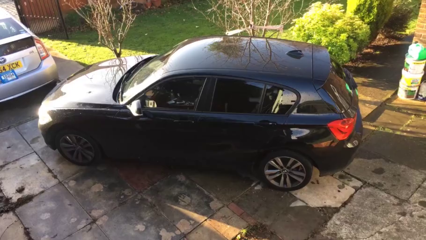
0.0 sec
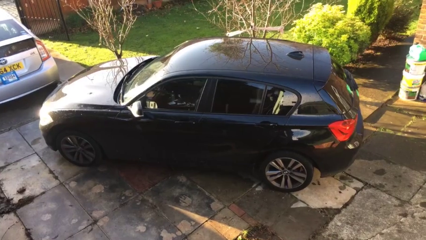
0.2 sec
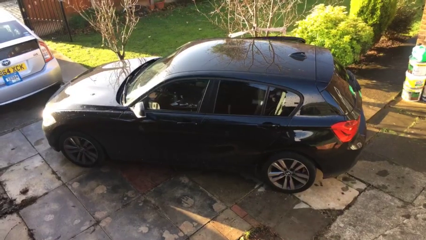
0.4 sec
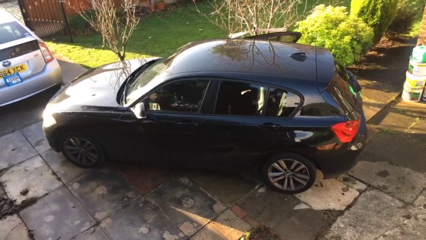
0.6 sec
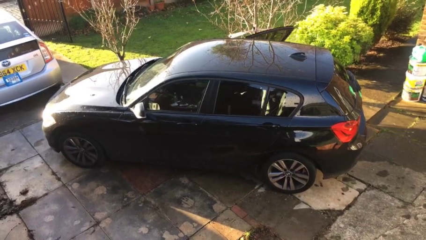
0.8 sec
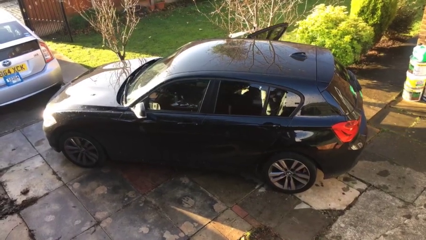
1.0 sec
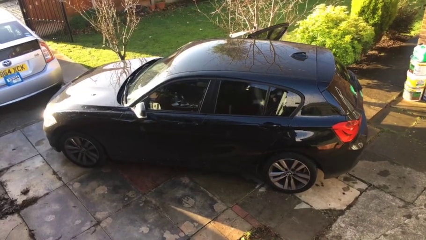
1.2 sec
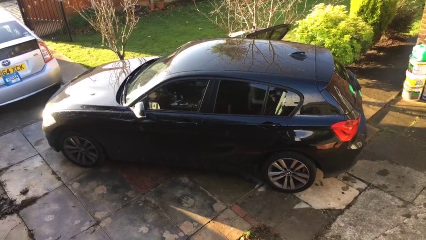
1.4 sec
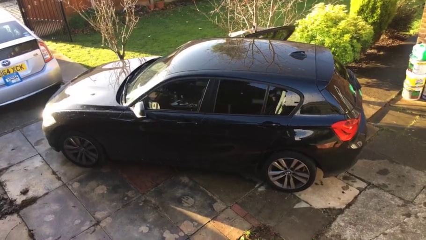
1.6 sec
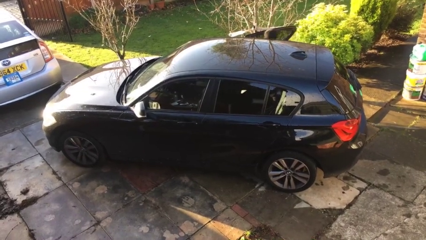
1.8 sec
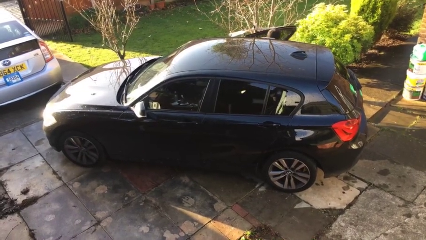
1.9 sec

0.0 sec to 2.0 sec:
car drops off person

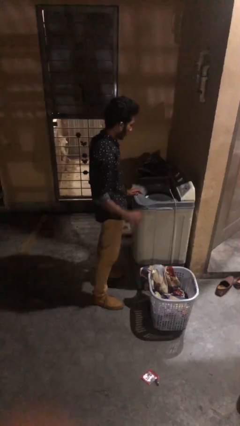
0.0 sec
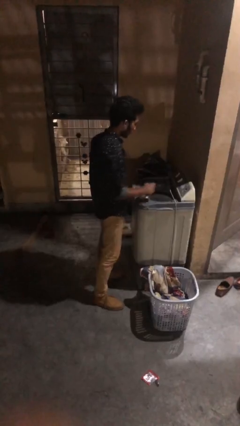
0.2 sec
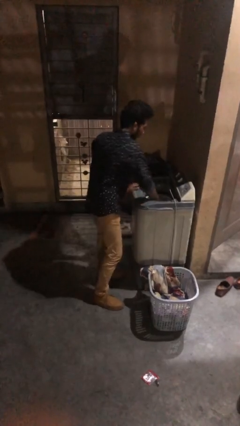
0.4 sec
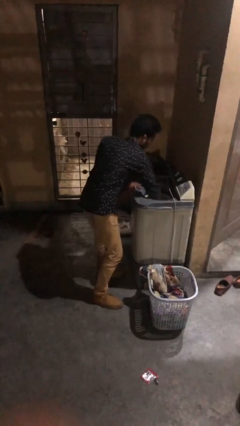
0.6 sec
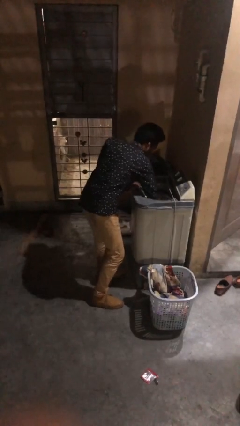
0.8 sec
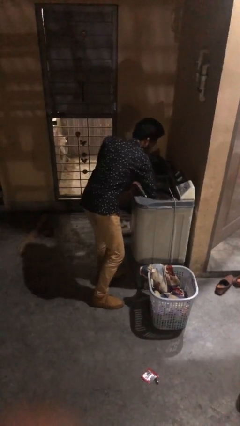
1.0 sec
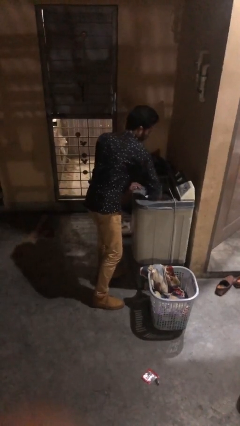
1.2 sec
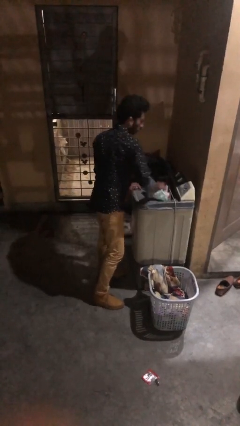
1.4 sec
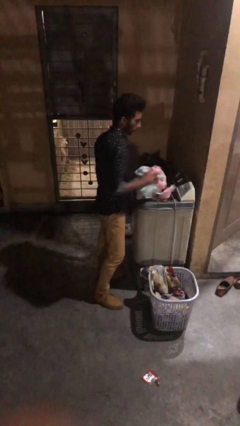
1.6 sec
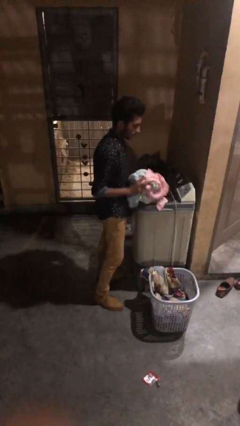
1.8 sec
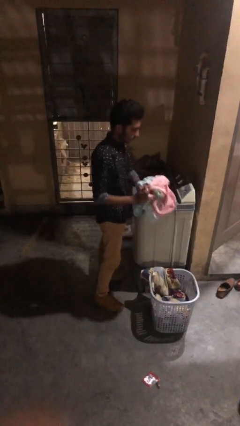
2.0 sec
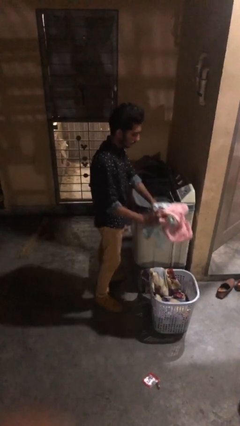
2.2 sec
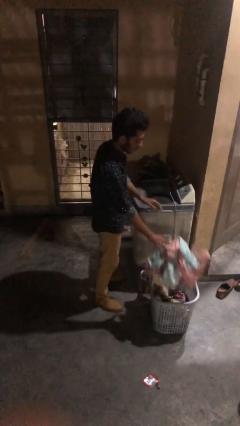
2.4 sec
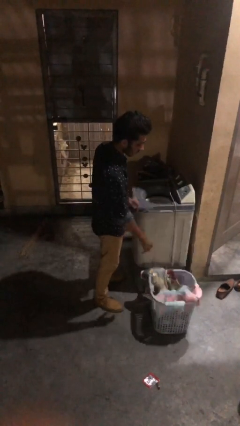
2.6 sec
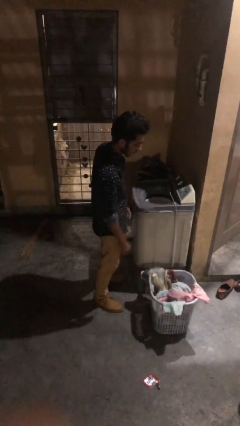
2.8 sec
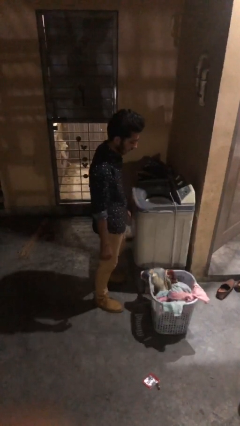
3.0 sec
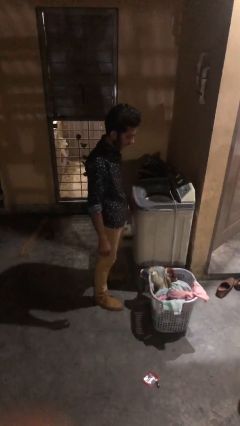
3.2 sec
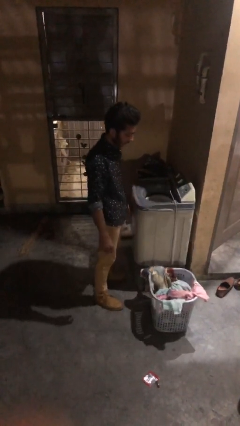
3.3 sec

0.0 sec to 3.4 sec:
person unloads clotheswasher

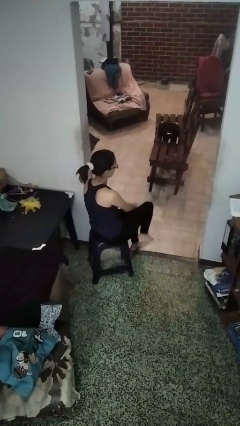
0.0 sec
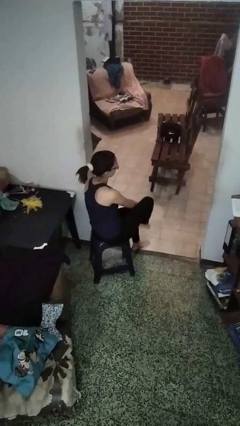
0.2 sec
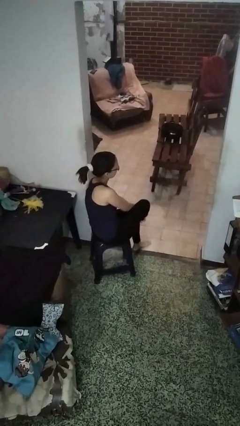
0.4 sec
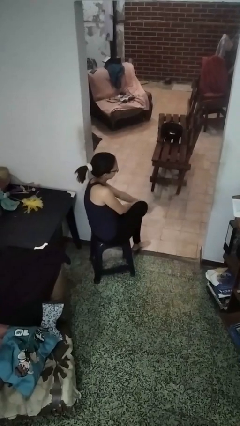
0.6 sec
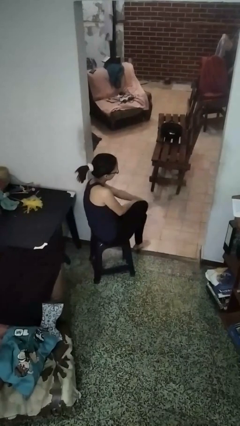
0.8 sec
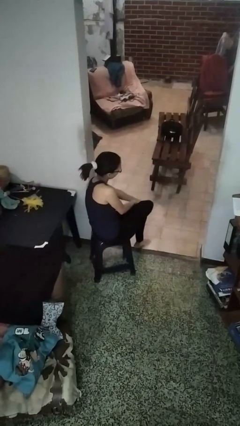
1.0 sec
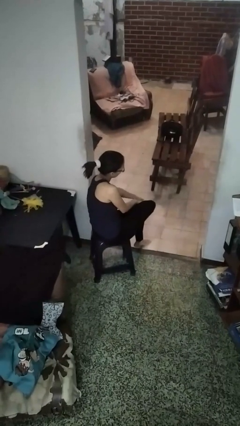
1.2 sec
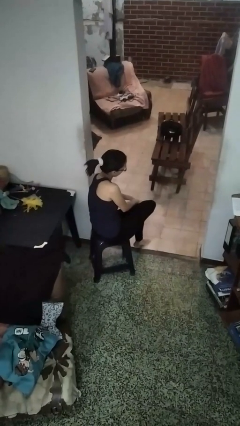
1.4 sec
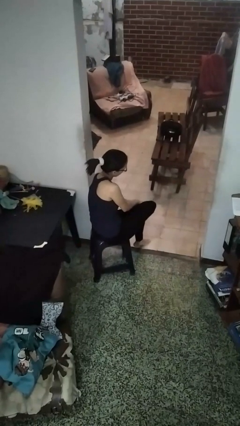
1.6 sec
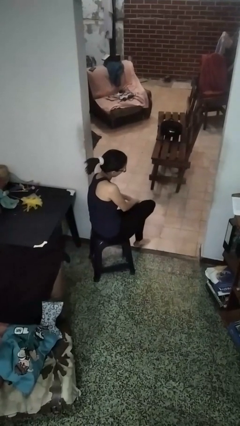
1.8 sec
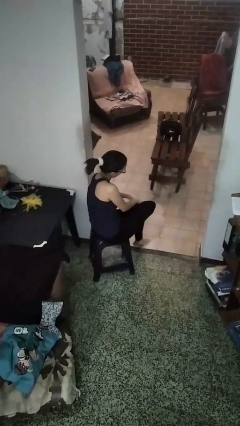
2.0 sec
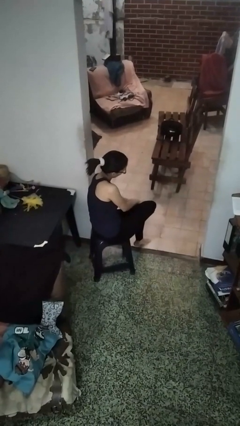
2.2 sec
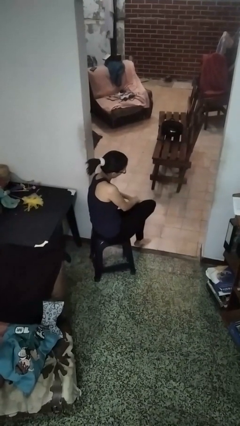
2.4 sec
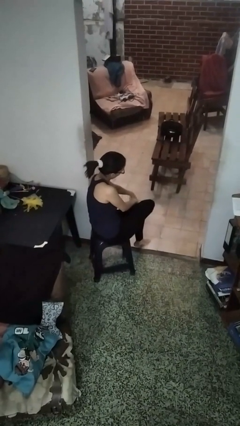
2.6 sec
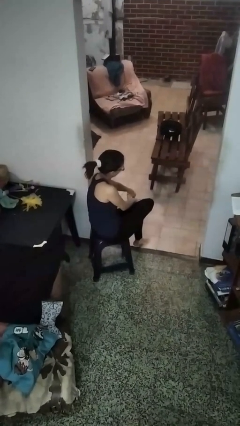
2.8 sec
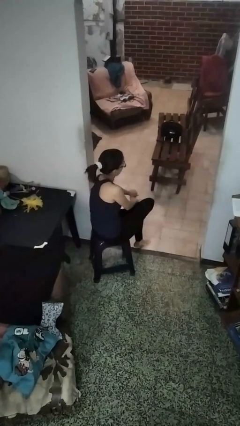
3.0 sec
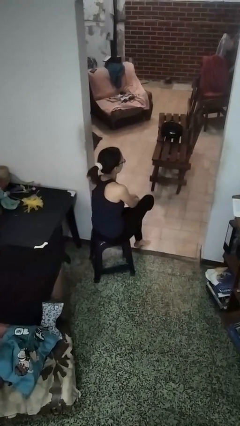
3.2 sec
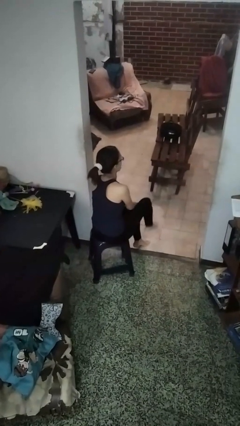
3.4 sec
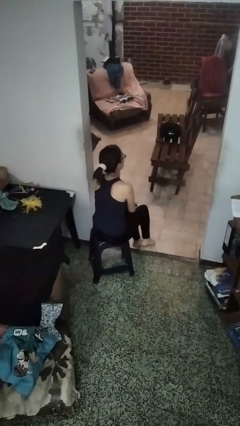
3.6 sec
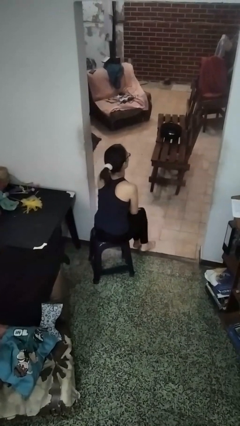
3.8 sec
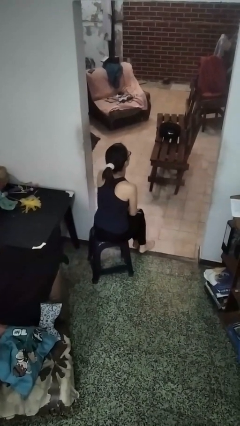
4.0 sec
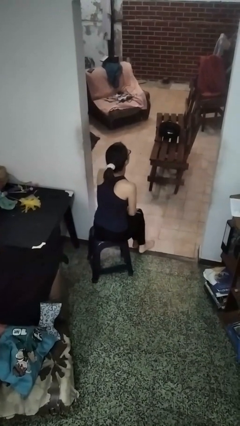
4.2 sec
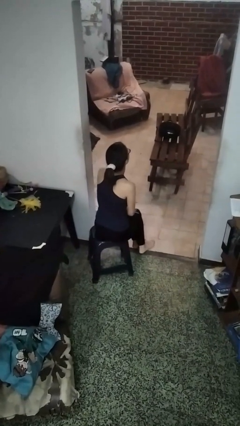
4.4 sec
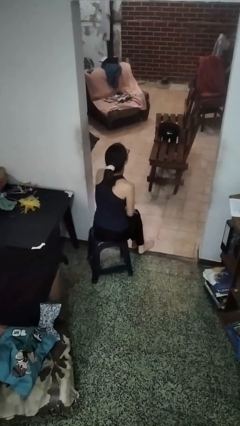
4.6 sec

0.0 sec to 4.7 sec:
person rubs foot

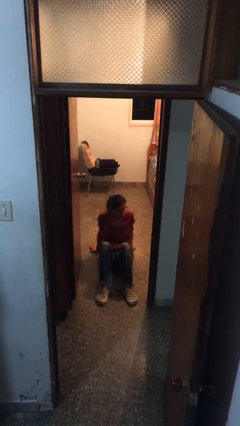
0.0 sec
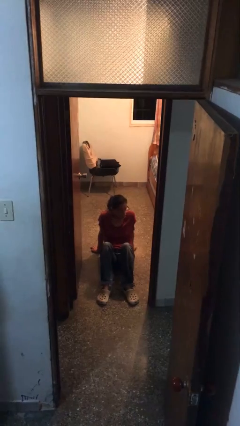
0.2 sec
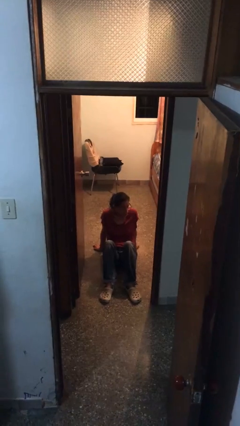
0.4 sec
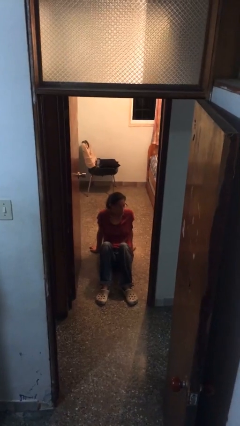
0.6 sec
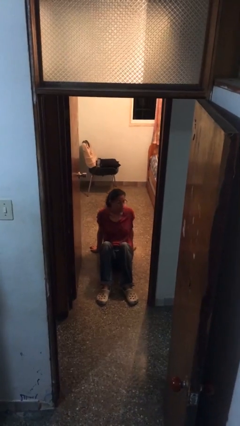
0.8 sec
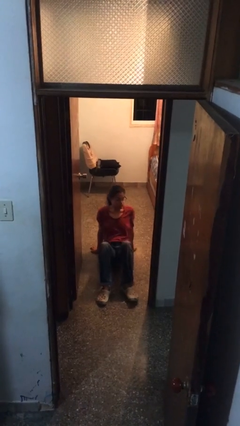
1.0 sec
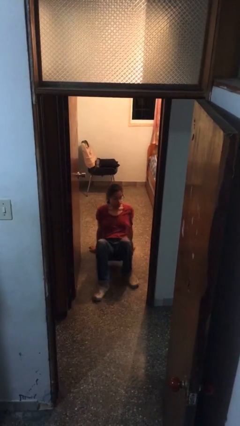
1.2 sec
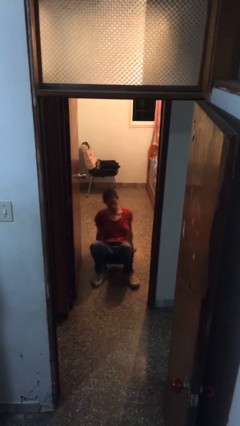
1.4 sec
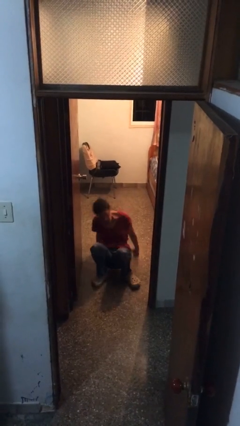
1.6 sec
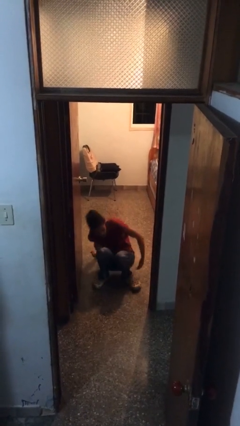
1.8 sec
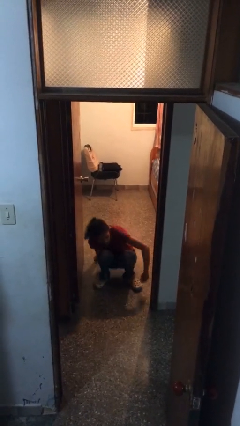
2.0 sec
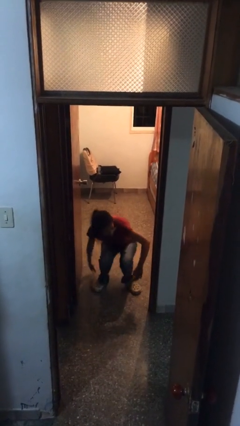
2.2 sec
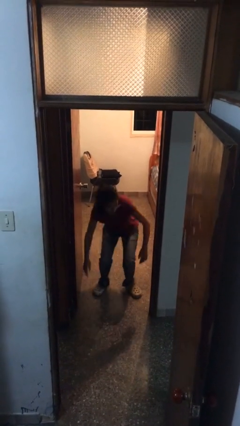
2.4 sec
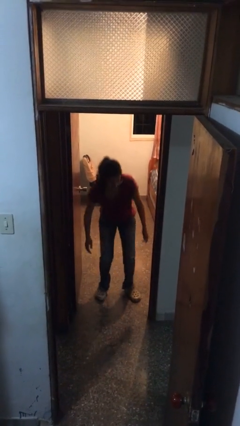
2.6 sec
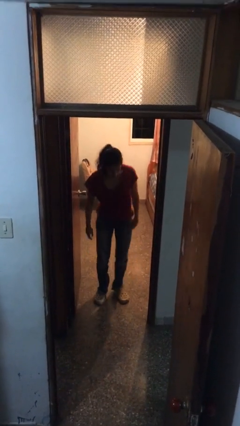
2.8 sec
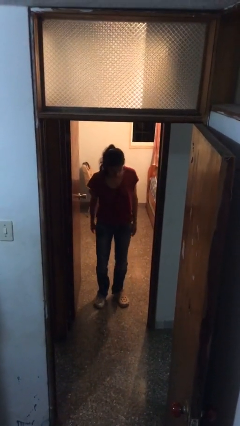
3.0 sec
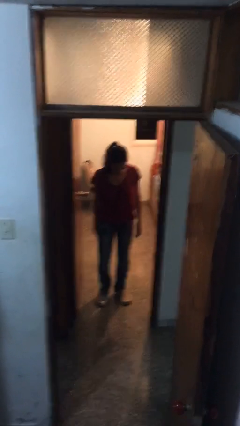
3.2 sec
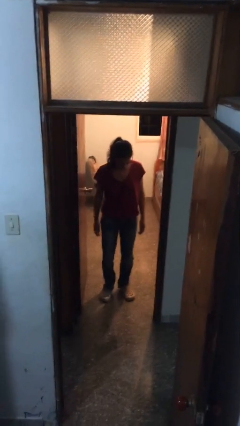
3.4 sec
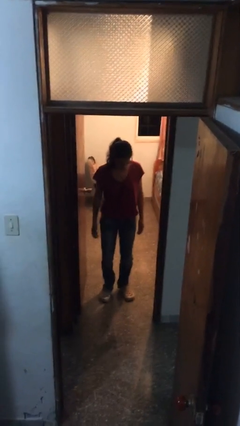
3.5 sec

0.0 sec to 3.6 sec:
person stands up

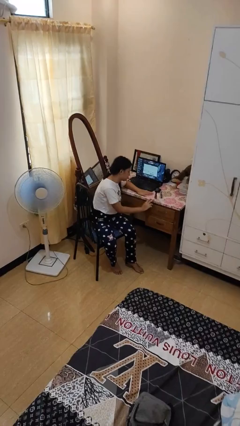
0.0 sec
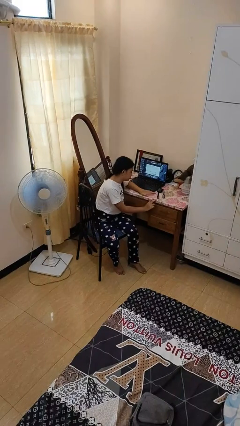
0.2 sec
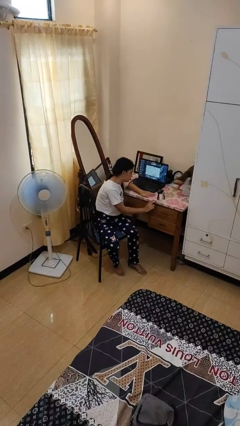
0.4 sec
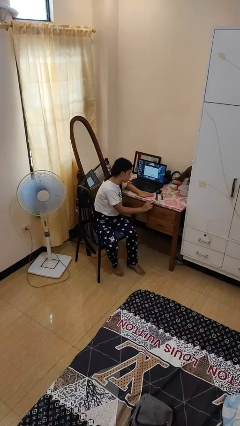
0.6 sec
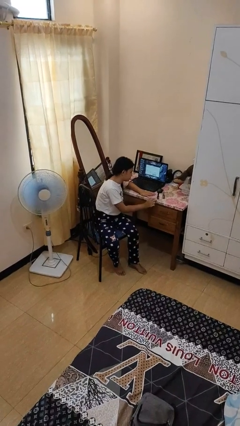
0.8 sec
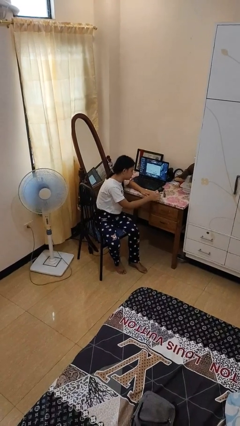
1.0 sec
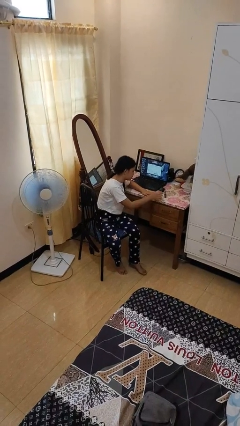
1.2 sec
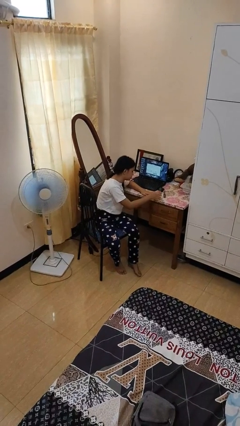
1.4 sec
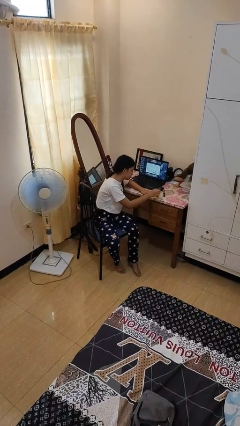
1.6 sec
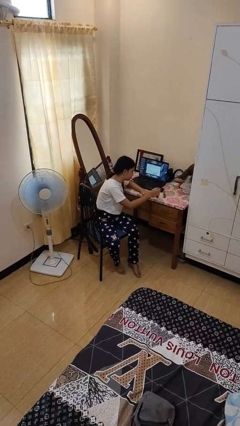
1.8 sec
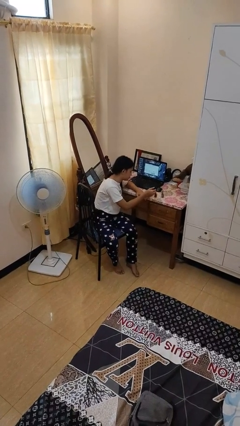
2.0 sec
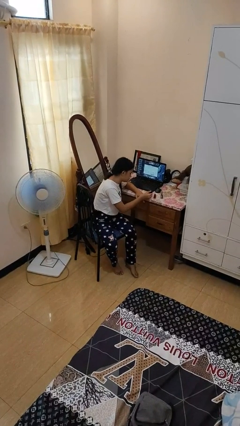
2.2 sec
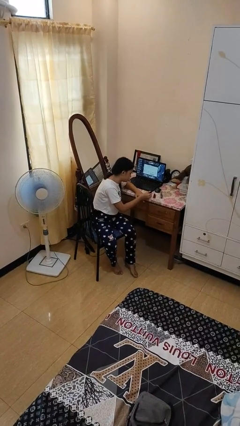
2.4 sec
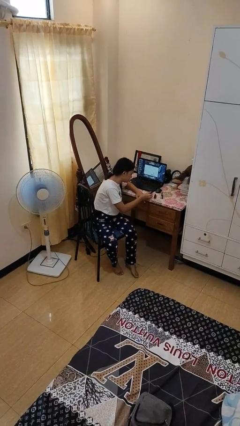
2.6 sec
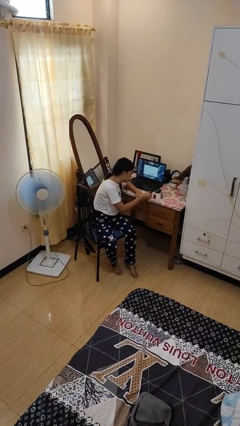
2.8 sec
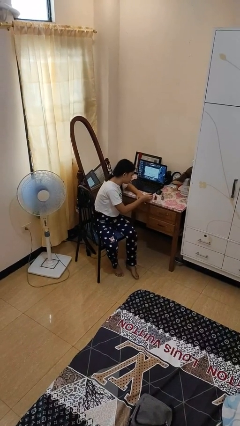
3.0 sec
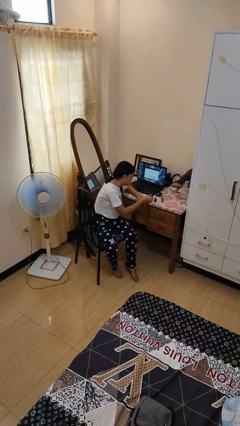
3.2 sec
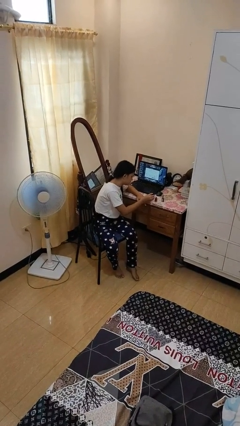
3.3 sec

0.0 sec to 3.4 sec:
person paints fingernails

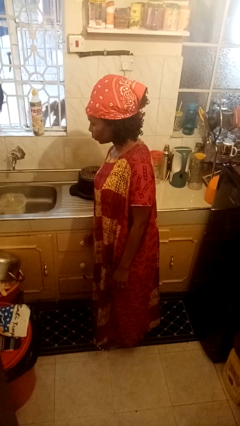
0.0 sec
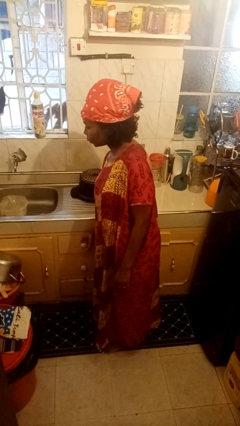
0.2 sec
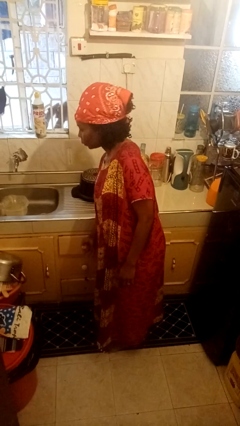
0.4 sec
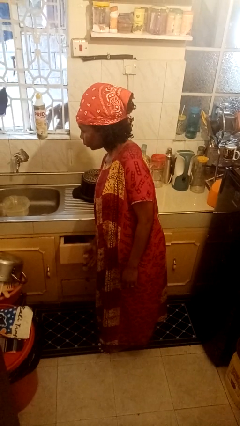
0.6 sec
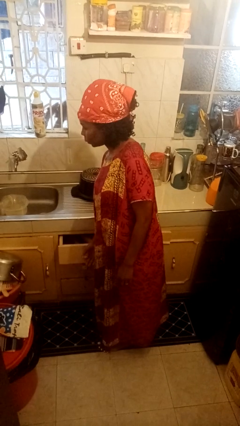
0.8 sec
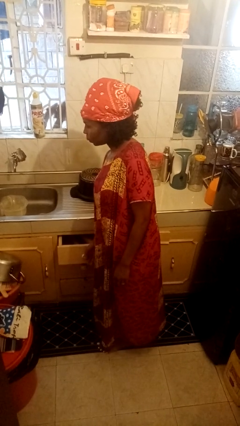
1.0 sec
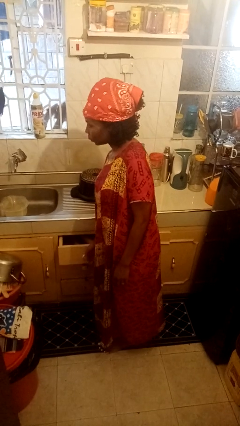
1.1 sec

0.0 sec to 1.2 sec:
person opens kitchen drawer
